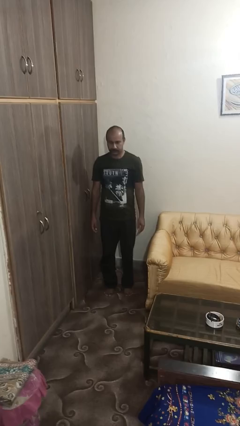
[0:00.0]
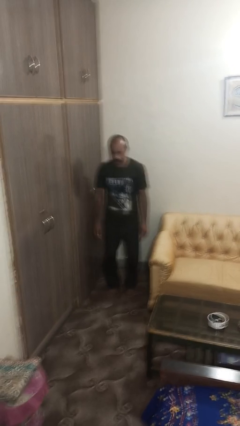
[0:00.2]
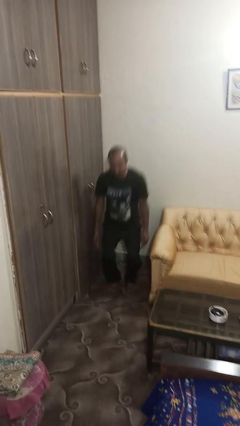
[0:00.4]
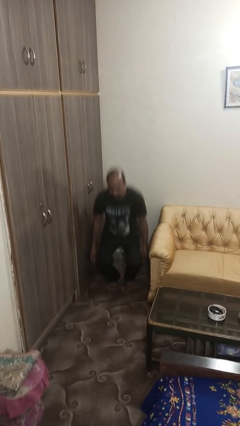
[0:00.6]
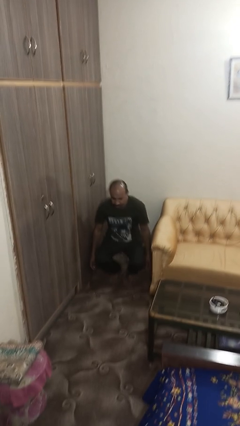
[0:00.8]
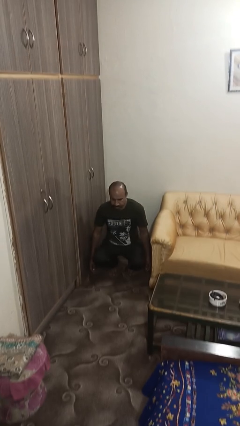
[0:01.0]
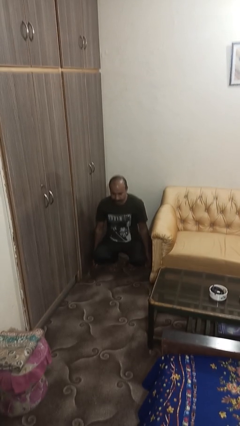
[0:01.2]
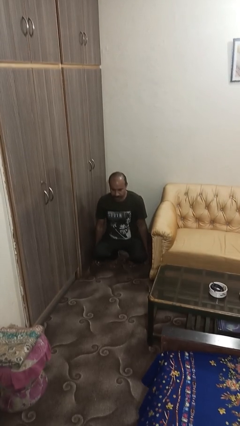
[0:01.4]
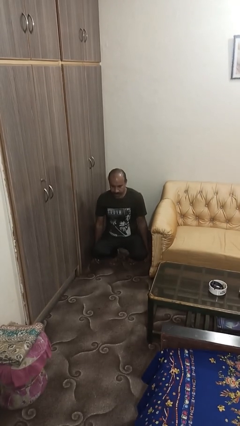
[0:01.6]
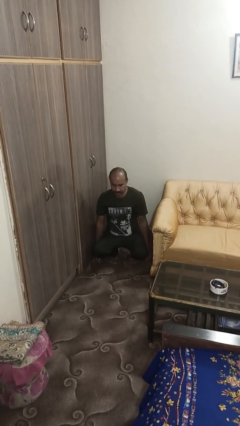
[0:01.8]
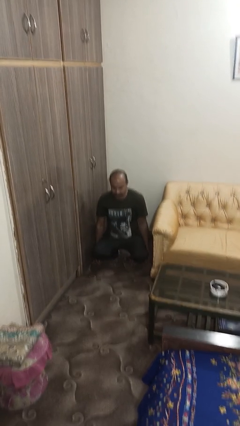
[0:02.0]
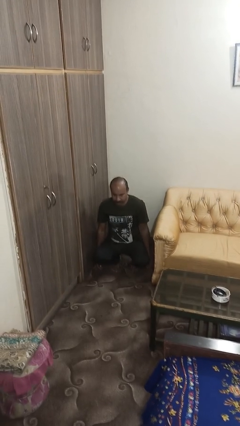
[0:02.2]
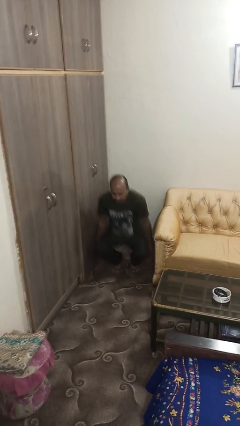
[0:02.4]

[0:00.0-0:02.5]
person squats

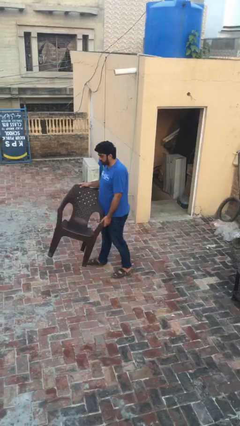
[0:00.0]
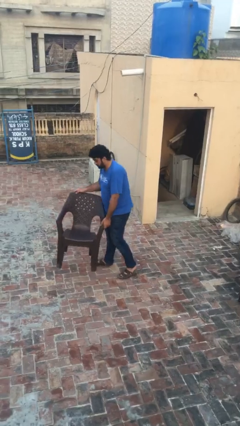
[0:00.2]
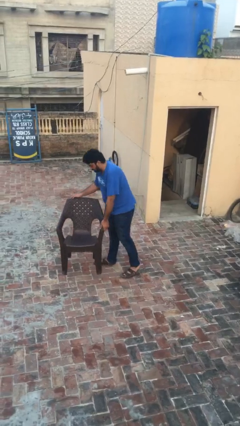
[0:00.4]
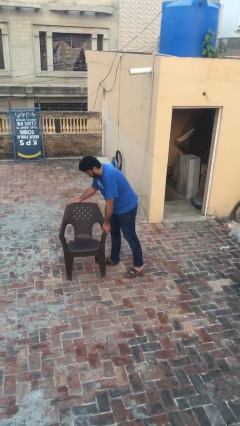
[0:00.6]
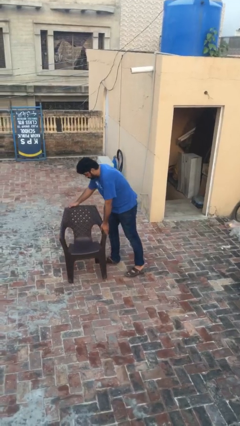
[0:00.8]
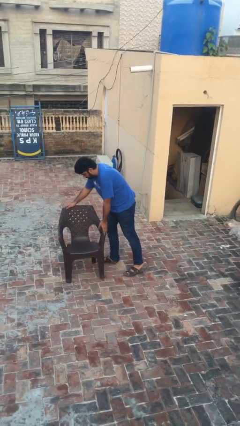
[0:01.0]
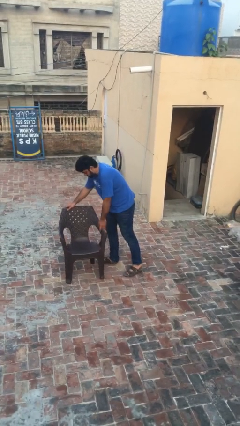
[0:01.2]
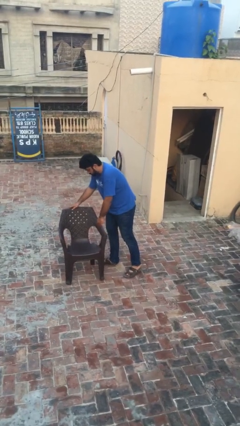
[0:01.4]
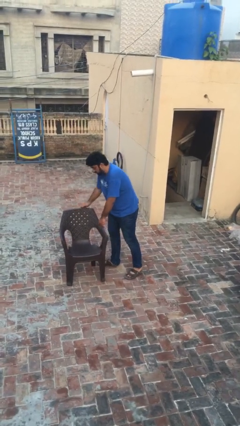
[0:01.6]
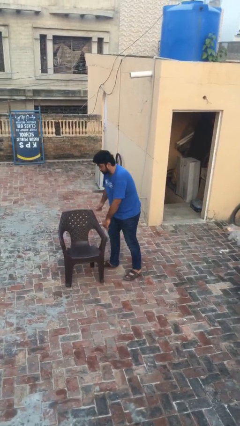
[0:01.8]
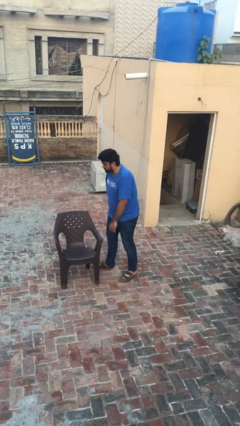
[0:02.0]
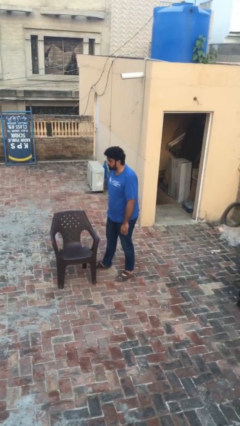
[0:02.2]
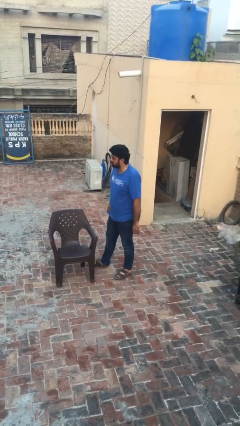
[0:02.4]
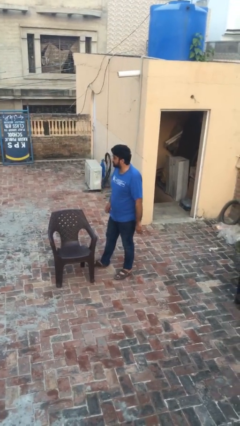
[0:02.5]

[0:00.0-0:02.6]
person puts down object on floor

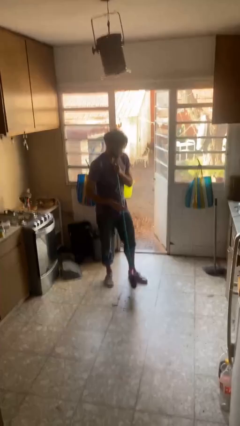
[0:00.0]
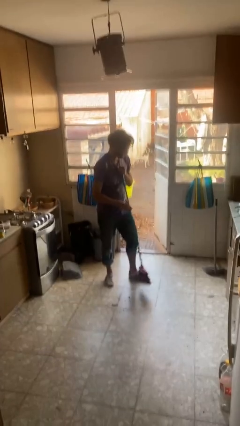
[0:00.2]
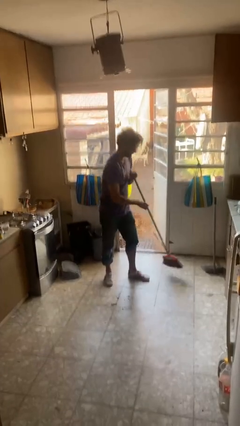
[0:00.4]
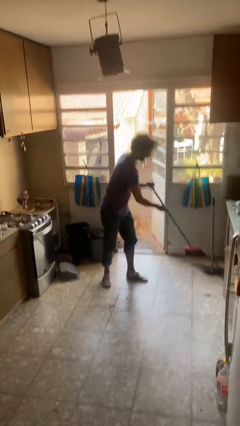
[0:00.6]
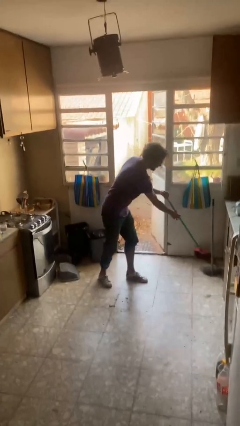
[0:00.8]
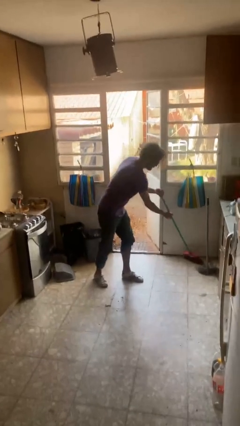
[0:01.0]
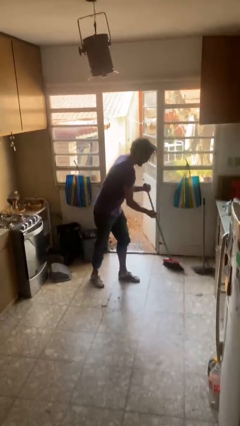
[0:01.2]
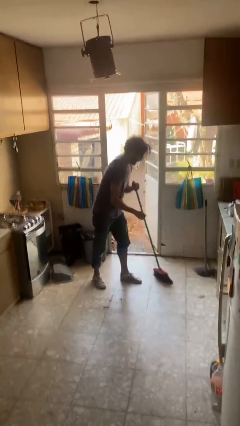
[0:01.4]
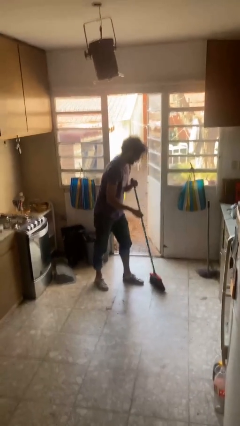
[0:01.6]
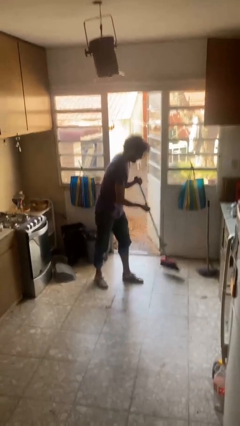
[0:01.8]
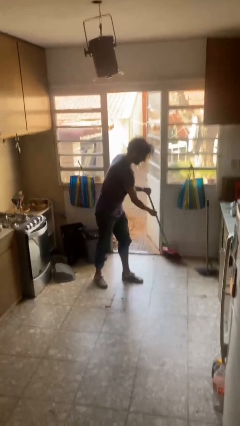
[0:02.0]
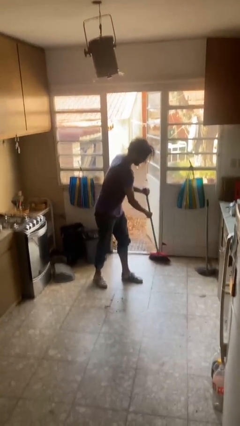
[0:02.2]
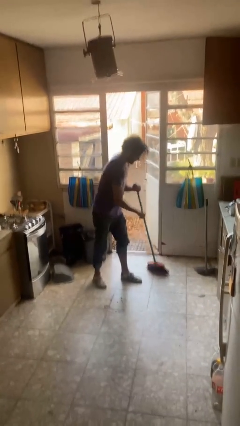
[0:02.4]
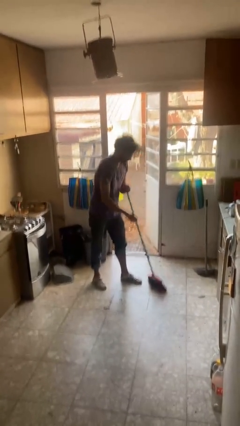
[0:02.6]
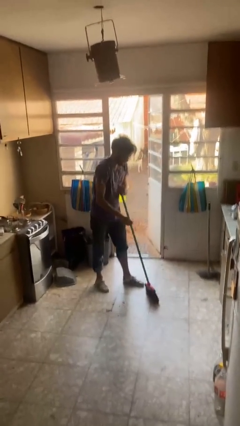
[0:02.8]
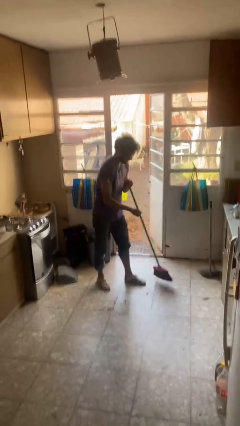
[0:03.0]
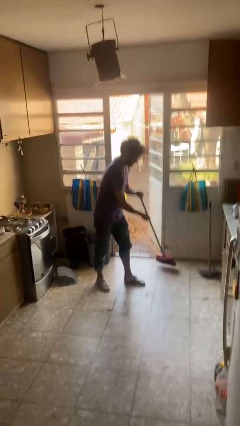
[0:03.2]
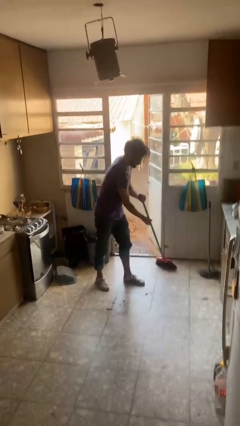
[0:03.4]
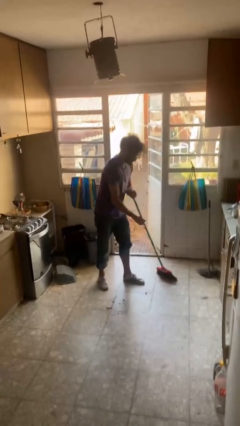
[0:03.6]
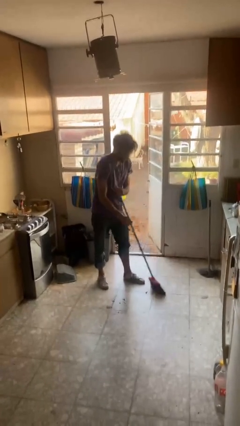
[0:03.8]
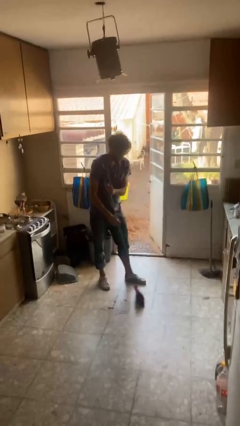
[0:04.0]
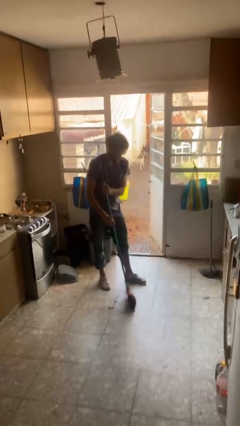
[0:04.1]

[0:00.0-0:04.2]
person sweeps floor

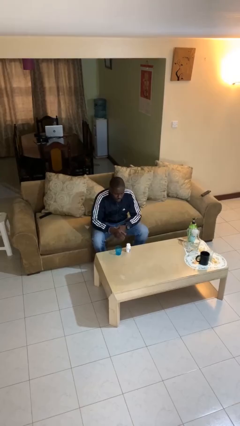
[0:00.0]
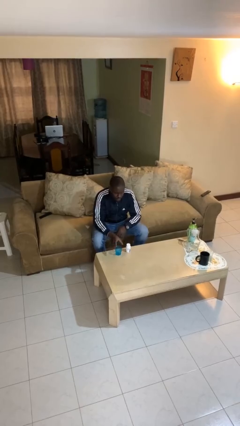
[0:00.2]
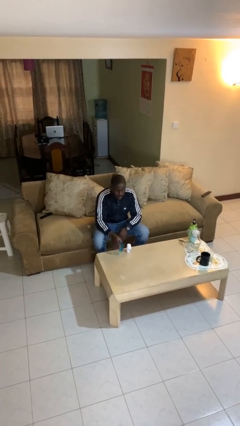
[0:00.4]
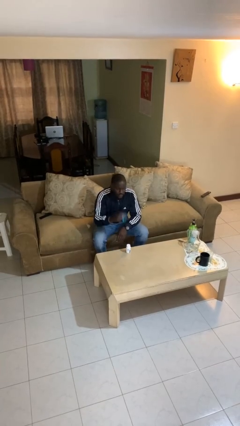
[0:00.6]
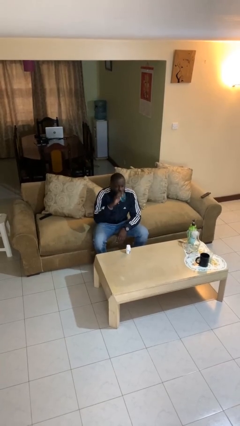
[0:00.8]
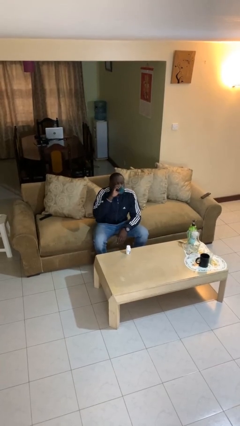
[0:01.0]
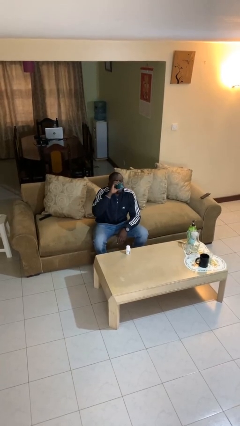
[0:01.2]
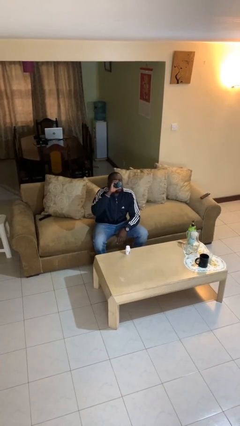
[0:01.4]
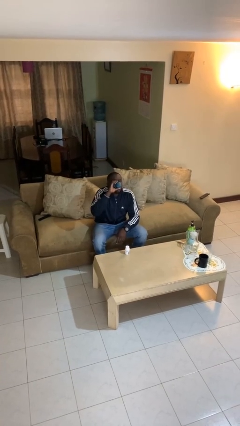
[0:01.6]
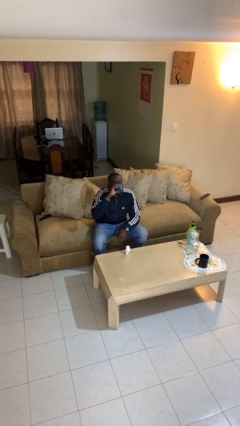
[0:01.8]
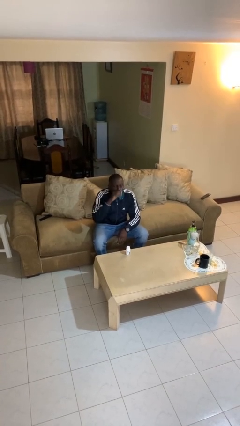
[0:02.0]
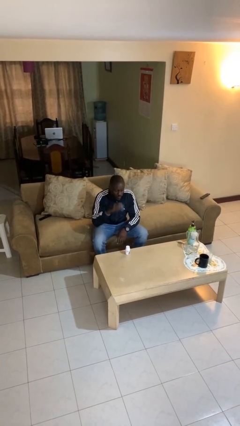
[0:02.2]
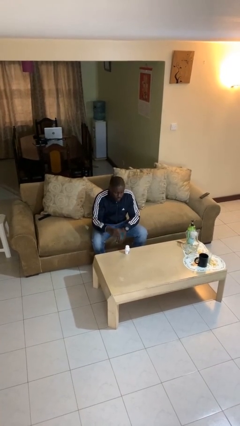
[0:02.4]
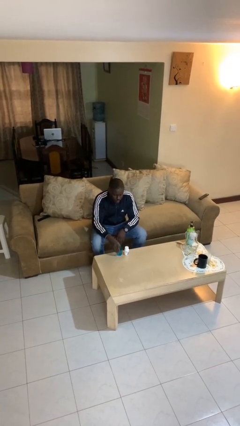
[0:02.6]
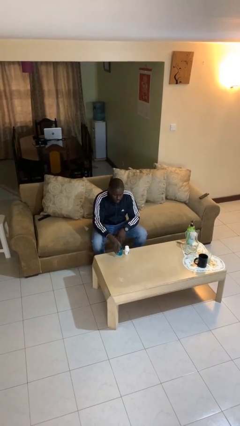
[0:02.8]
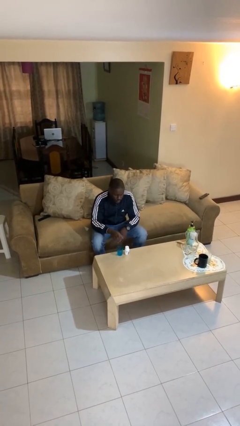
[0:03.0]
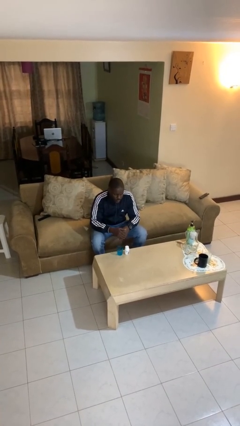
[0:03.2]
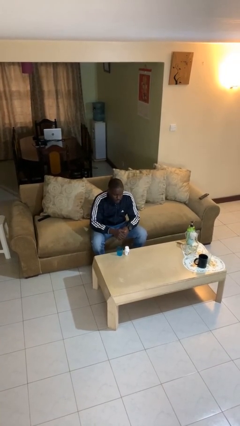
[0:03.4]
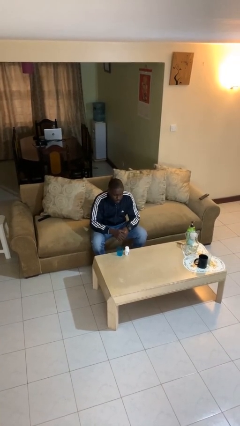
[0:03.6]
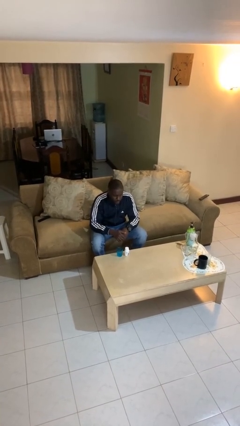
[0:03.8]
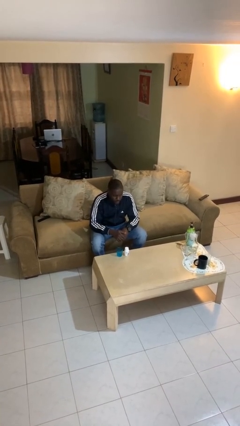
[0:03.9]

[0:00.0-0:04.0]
person drinks from cup

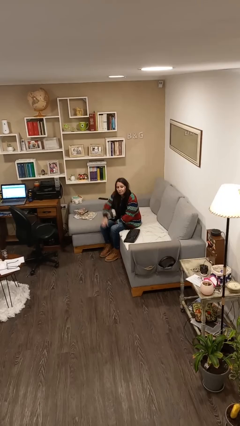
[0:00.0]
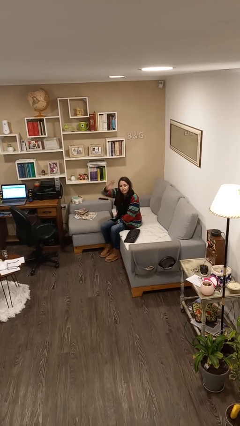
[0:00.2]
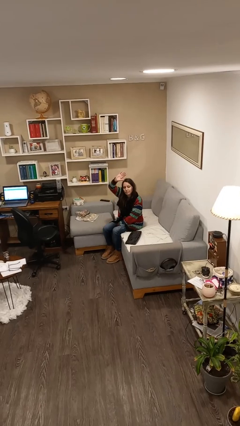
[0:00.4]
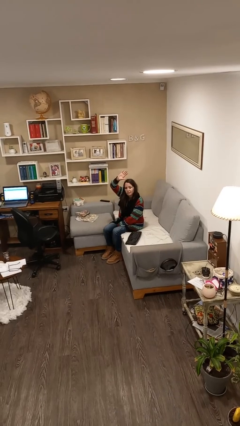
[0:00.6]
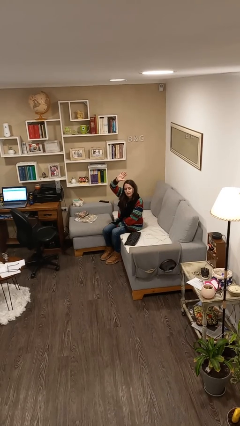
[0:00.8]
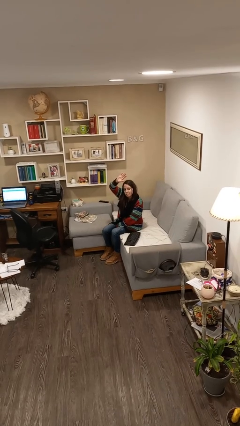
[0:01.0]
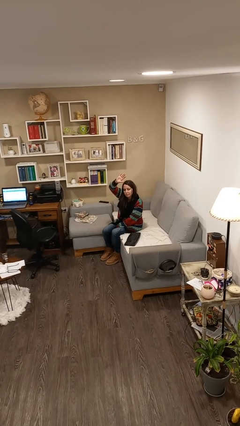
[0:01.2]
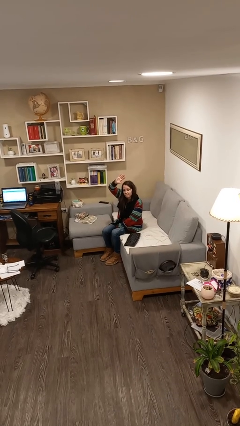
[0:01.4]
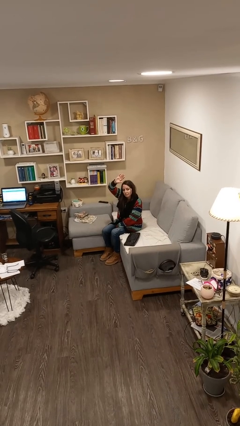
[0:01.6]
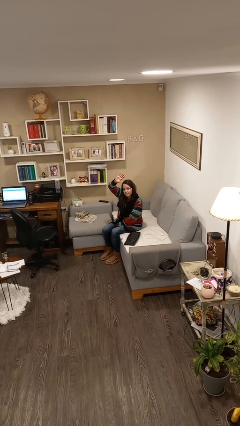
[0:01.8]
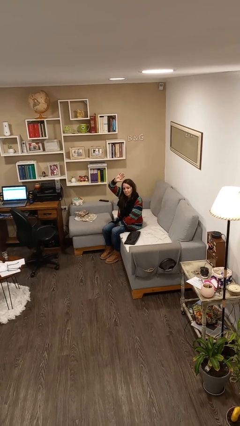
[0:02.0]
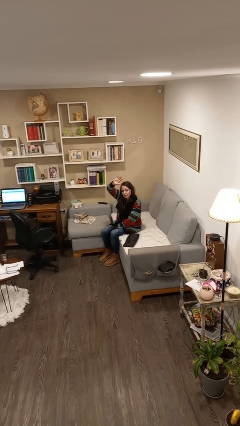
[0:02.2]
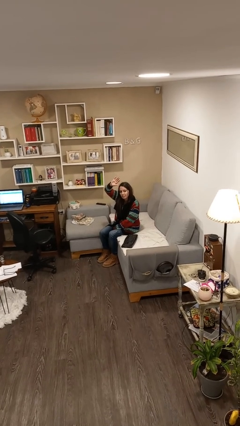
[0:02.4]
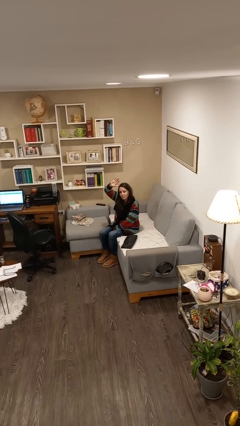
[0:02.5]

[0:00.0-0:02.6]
person gestures raise hand

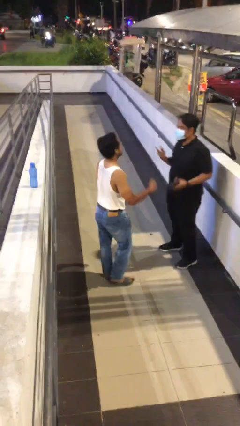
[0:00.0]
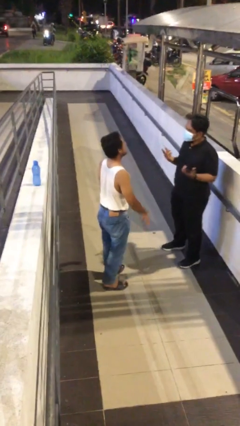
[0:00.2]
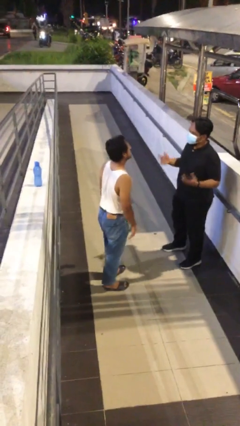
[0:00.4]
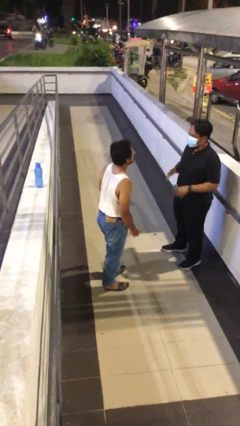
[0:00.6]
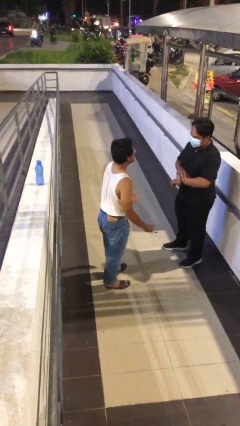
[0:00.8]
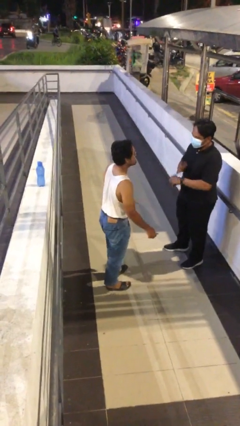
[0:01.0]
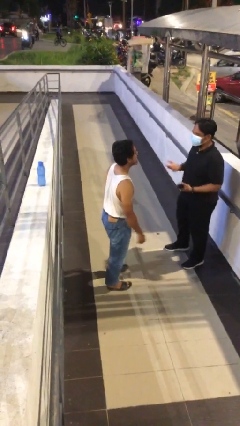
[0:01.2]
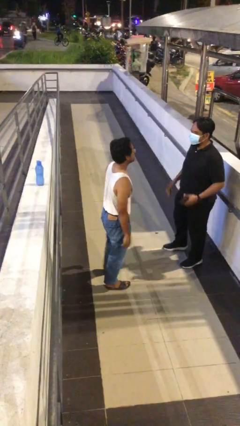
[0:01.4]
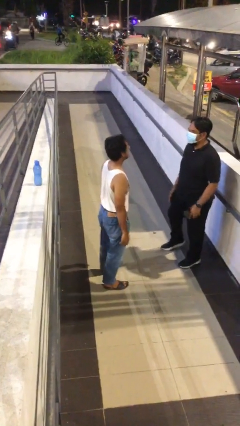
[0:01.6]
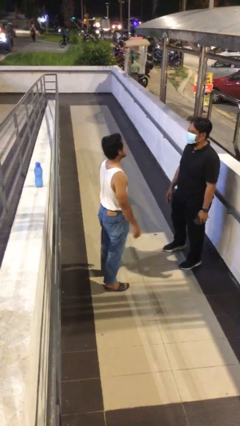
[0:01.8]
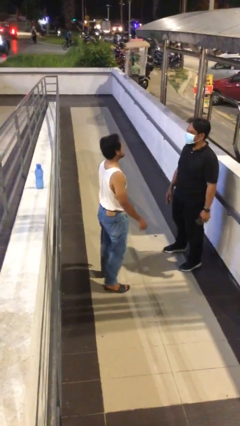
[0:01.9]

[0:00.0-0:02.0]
person talks to person
